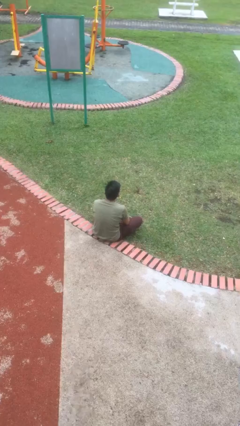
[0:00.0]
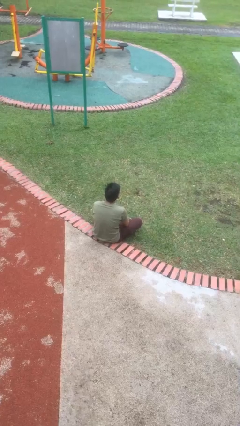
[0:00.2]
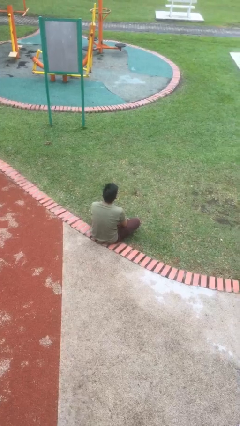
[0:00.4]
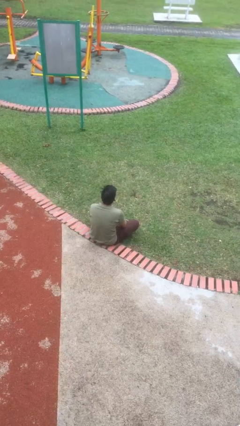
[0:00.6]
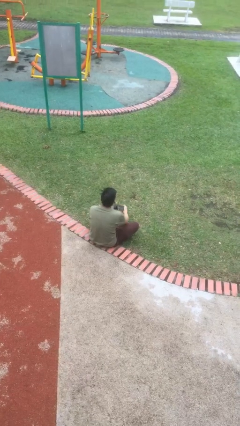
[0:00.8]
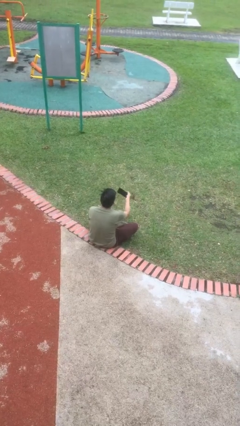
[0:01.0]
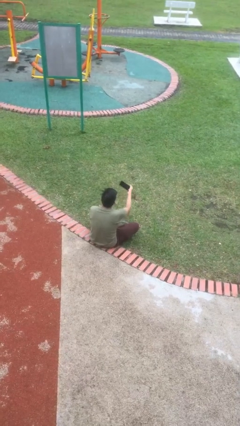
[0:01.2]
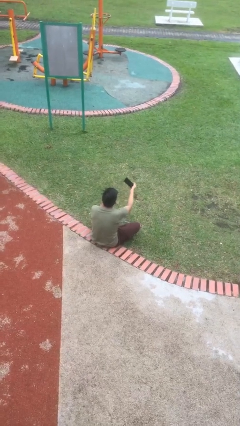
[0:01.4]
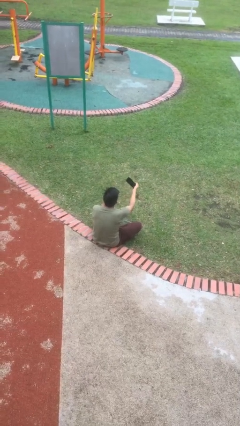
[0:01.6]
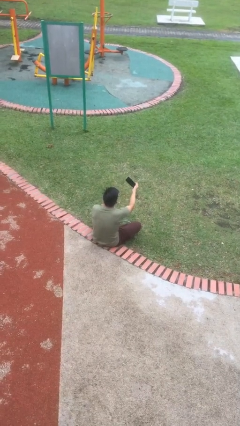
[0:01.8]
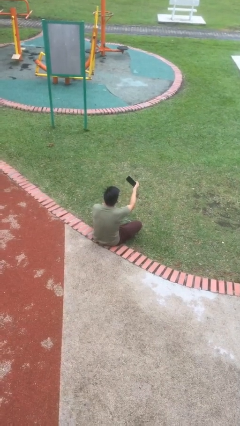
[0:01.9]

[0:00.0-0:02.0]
person takes selfie

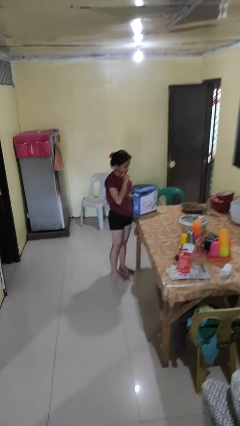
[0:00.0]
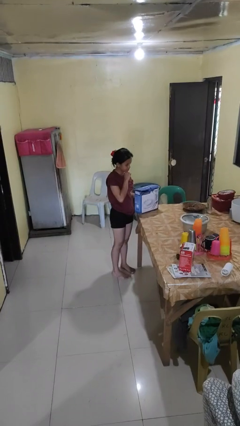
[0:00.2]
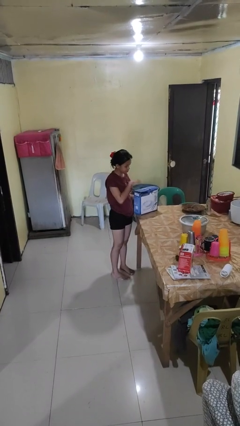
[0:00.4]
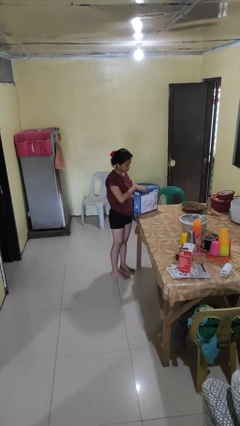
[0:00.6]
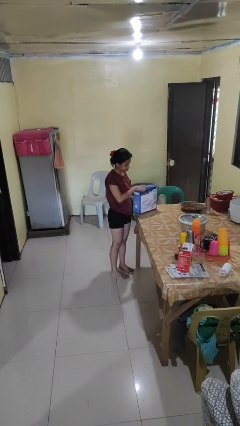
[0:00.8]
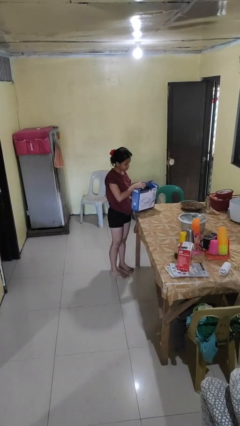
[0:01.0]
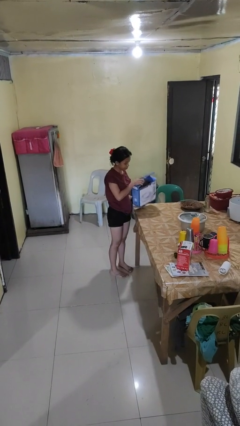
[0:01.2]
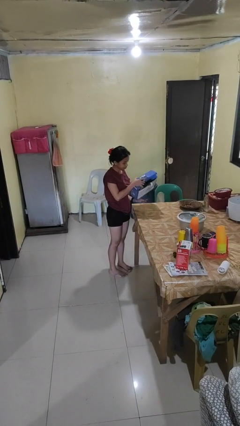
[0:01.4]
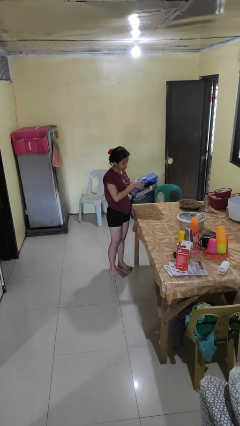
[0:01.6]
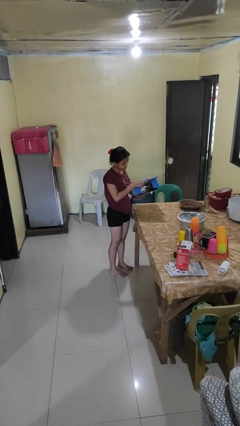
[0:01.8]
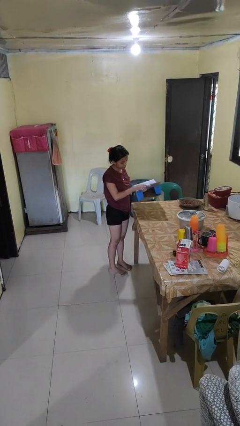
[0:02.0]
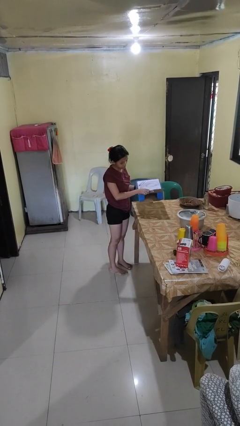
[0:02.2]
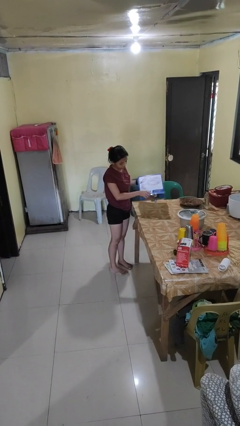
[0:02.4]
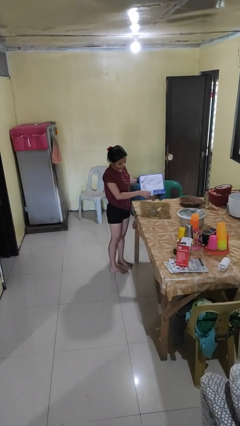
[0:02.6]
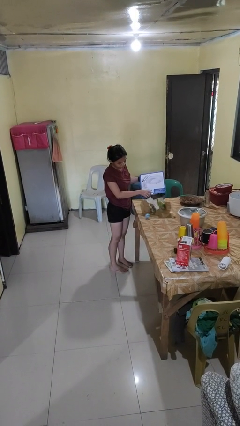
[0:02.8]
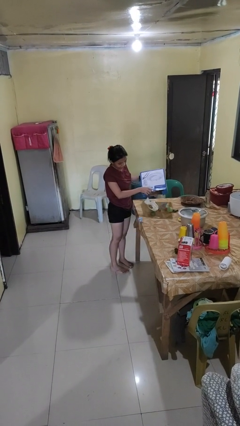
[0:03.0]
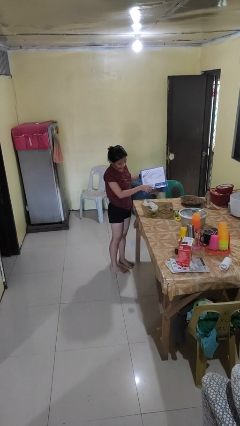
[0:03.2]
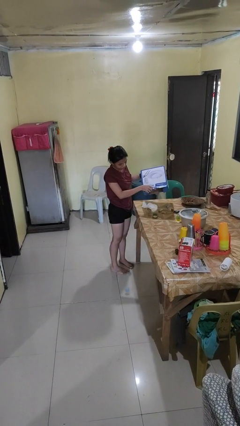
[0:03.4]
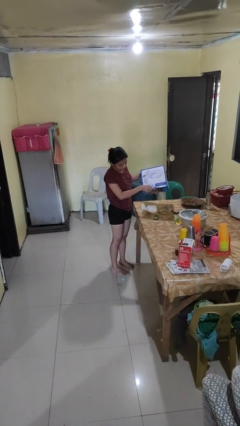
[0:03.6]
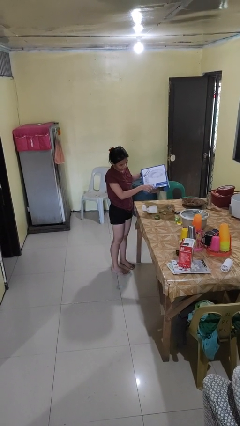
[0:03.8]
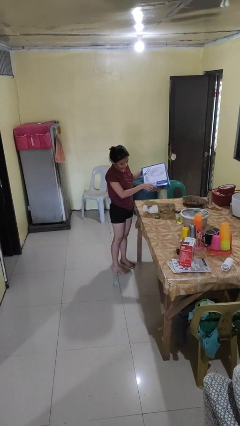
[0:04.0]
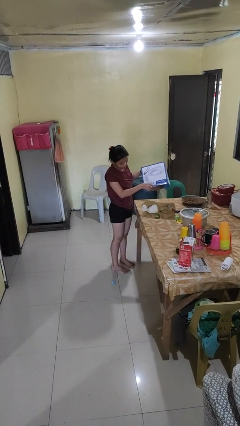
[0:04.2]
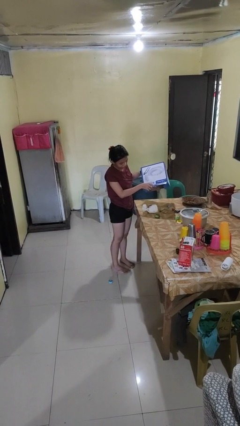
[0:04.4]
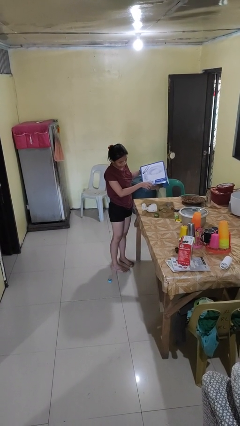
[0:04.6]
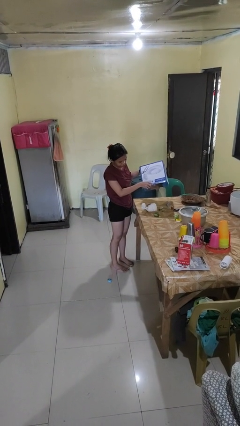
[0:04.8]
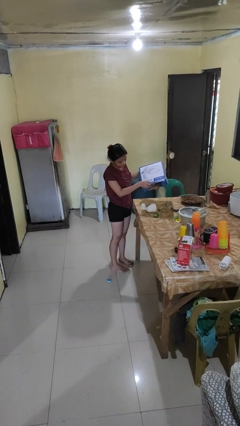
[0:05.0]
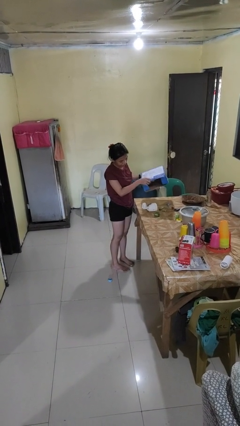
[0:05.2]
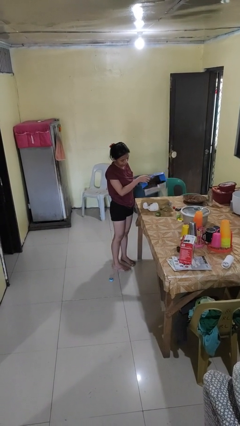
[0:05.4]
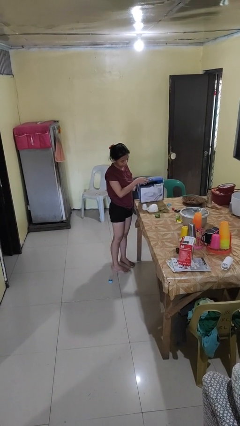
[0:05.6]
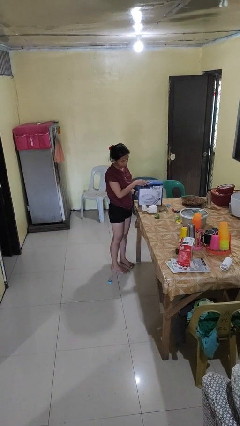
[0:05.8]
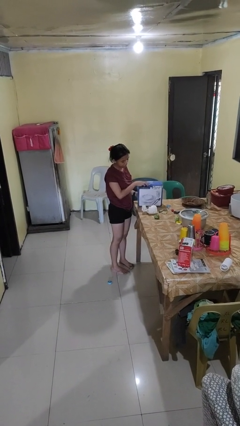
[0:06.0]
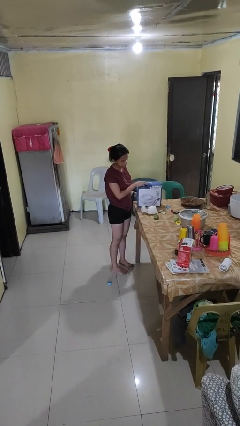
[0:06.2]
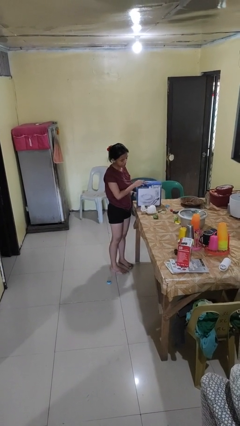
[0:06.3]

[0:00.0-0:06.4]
person unloads box onto table

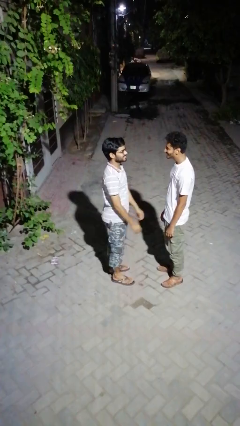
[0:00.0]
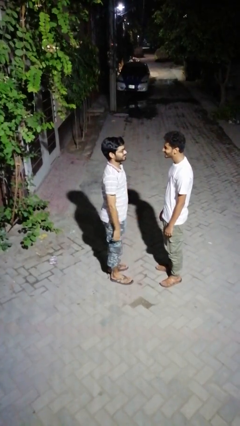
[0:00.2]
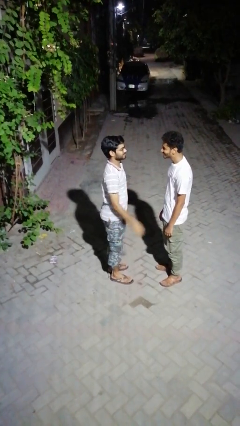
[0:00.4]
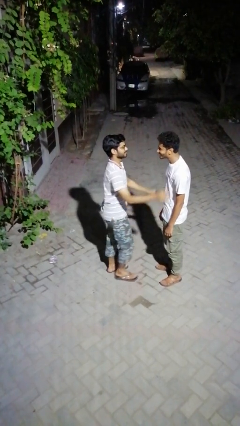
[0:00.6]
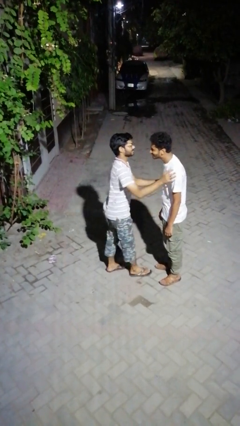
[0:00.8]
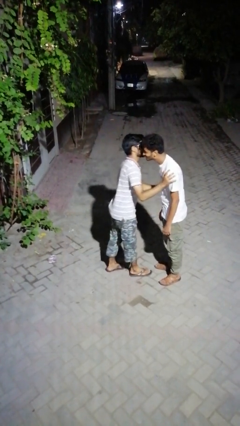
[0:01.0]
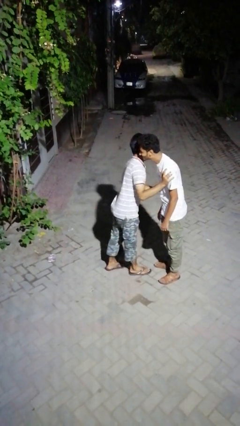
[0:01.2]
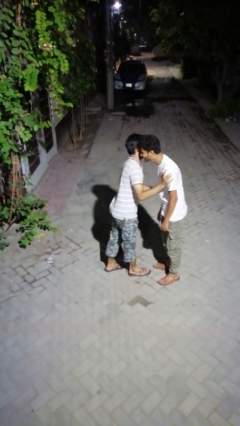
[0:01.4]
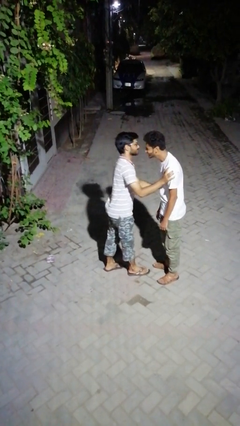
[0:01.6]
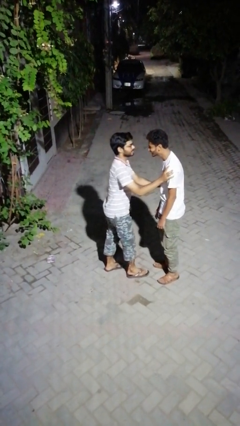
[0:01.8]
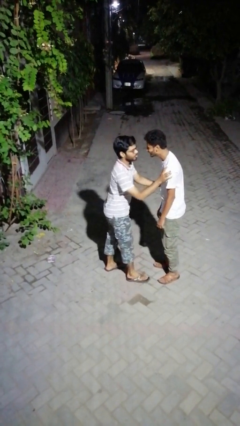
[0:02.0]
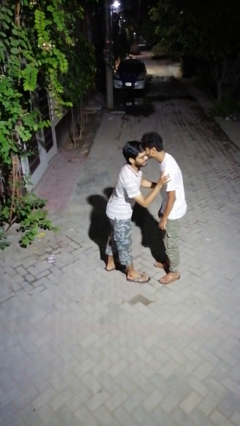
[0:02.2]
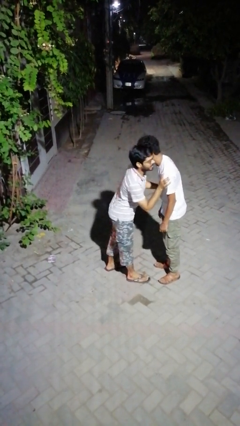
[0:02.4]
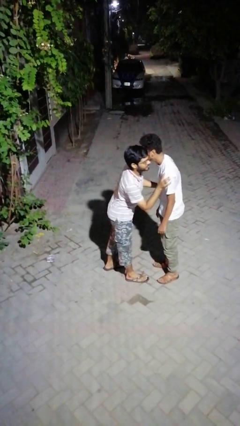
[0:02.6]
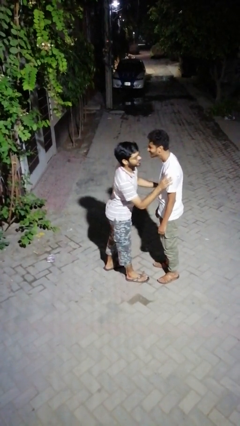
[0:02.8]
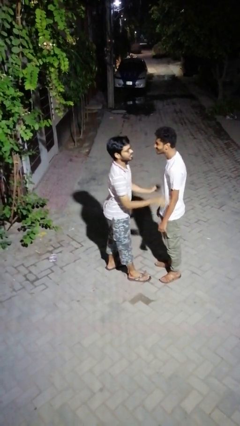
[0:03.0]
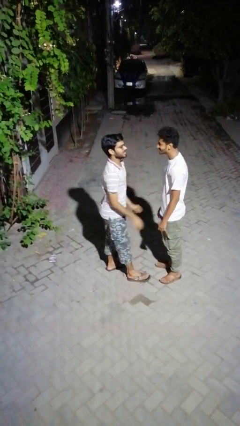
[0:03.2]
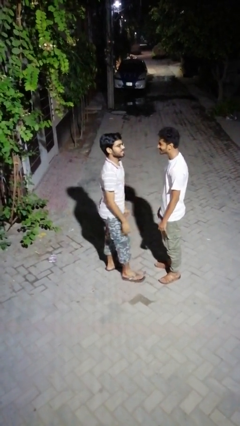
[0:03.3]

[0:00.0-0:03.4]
person kisses cheek of person

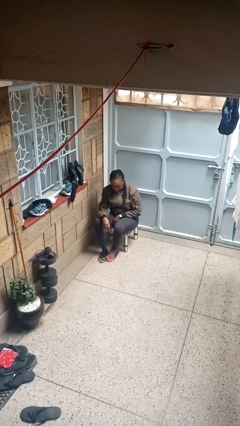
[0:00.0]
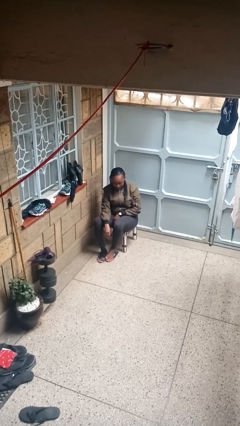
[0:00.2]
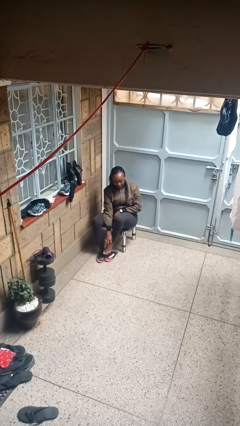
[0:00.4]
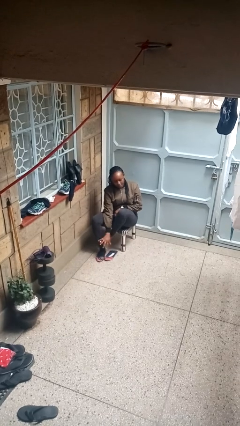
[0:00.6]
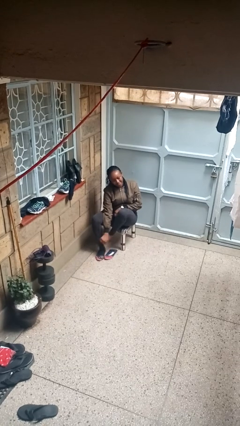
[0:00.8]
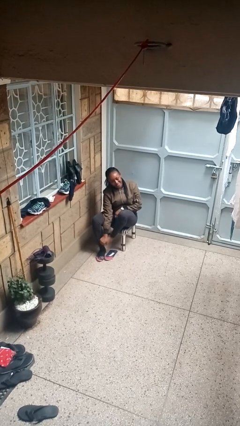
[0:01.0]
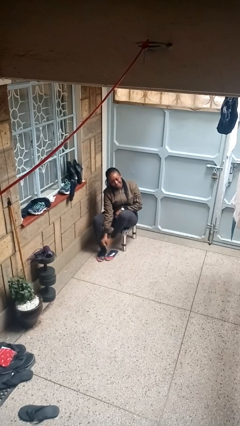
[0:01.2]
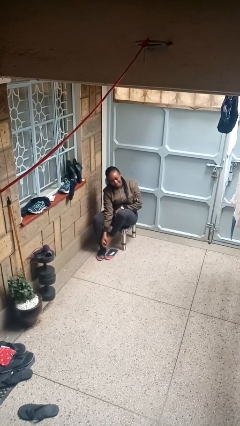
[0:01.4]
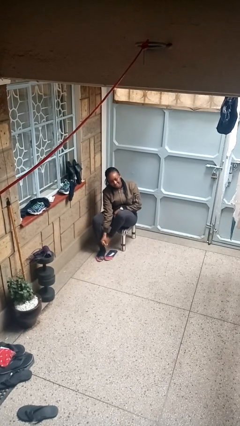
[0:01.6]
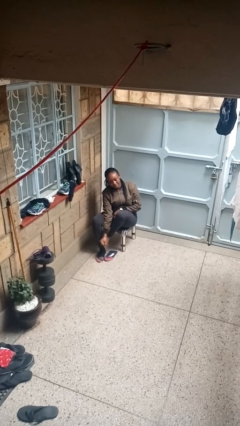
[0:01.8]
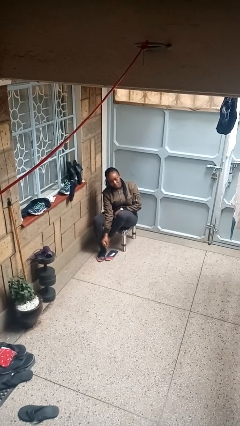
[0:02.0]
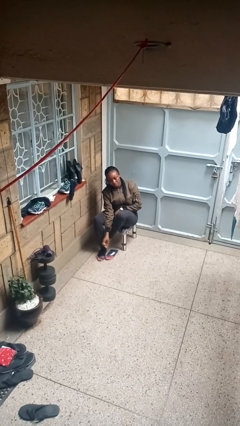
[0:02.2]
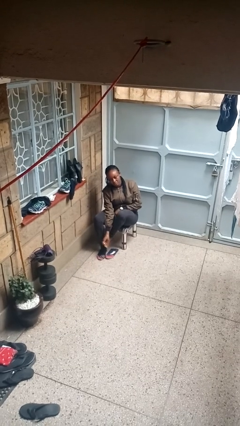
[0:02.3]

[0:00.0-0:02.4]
person rubs foot

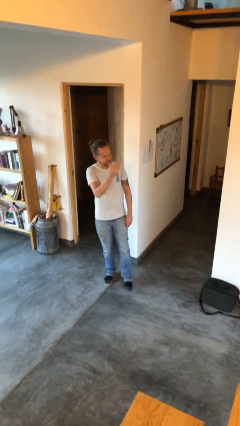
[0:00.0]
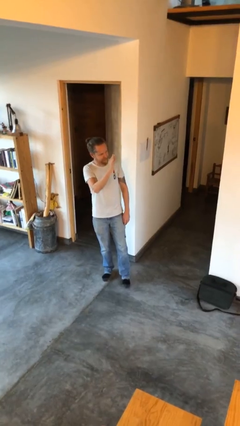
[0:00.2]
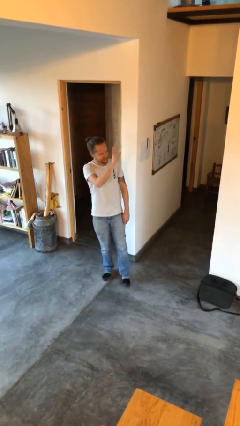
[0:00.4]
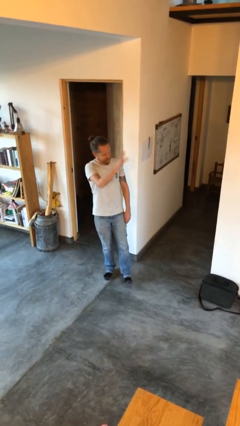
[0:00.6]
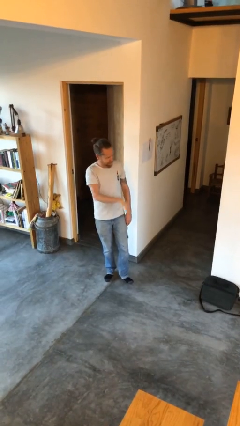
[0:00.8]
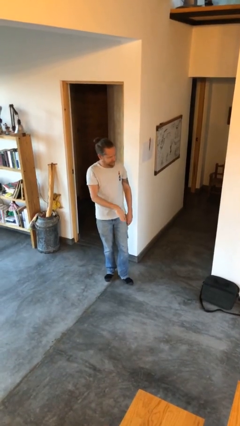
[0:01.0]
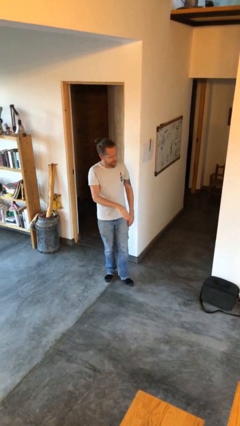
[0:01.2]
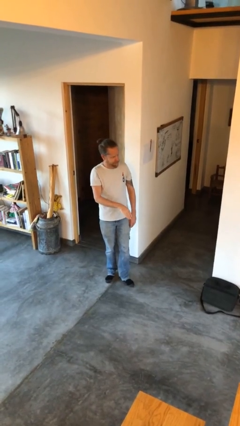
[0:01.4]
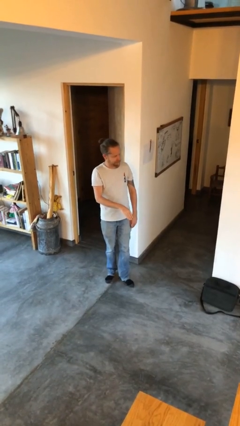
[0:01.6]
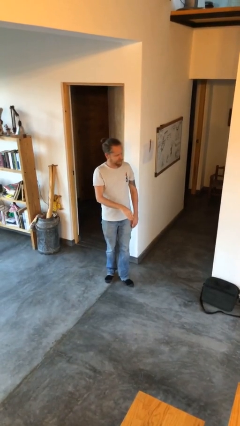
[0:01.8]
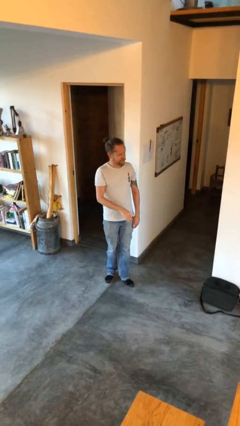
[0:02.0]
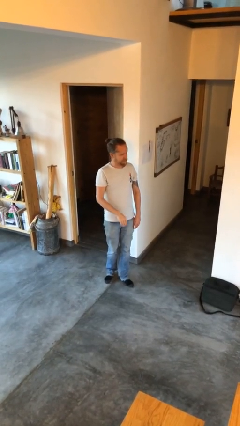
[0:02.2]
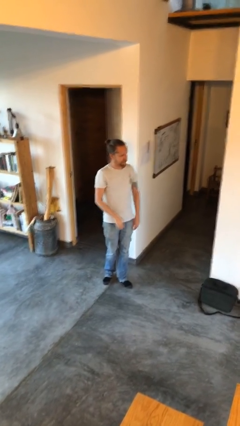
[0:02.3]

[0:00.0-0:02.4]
person gestures swipe down

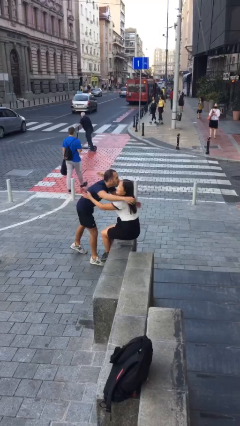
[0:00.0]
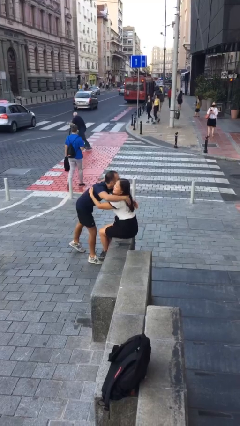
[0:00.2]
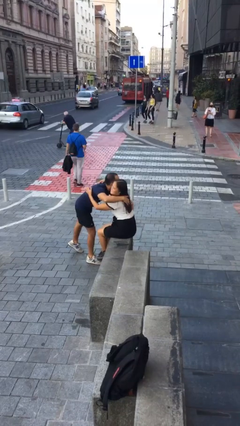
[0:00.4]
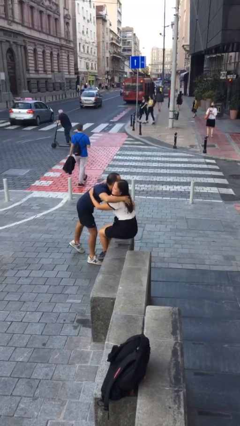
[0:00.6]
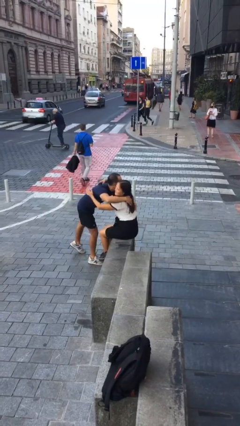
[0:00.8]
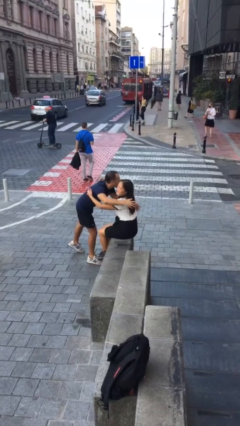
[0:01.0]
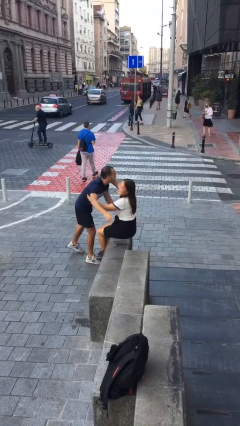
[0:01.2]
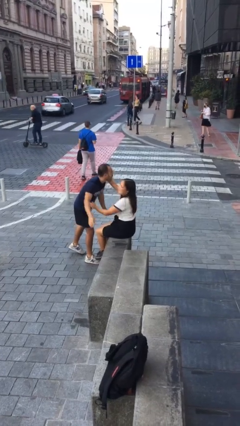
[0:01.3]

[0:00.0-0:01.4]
person embraces person
